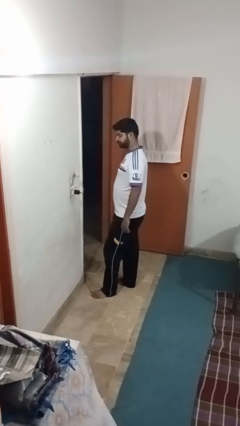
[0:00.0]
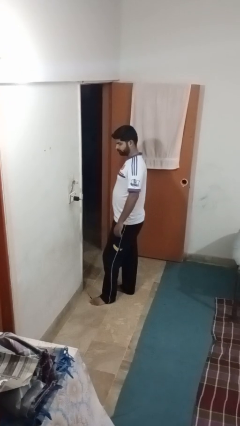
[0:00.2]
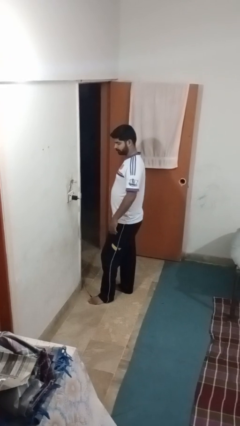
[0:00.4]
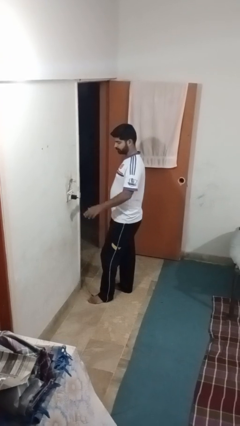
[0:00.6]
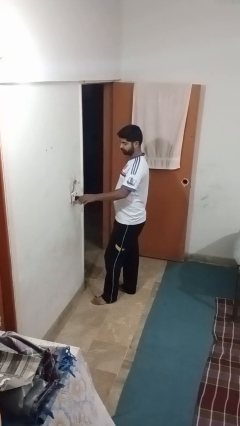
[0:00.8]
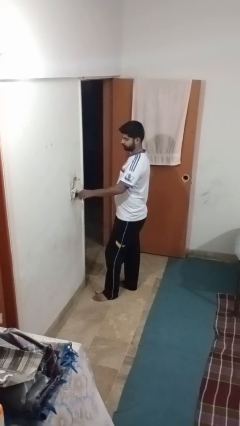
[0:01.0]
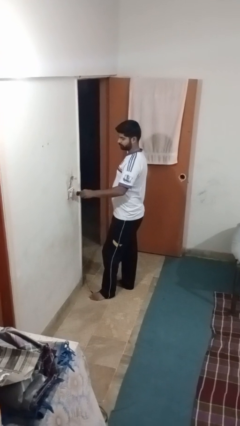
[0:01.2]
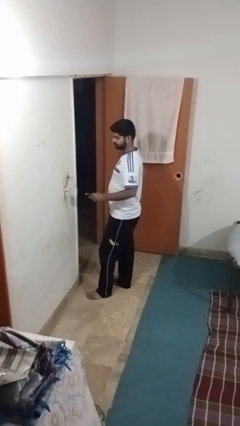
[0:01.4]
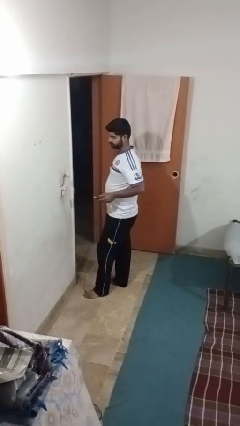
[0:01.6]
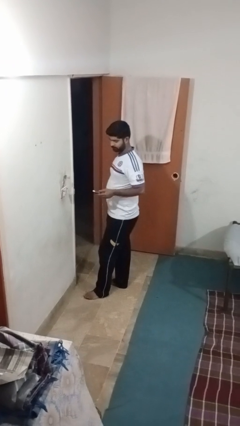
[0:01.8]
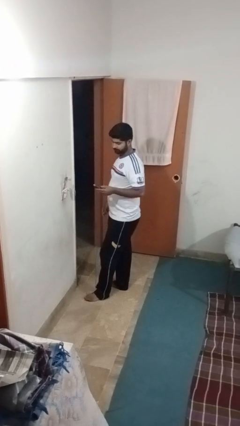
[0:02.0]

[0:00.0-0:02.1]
person unplugs from electrical socket

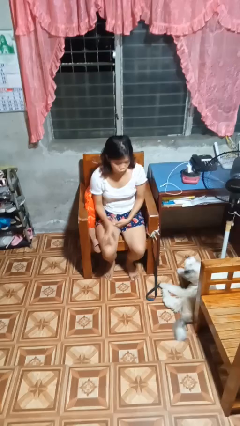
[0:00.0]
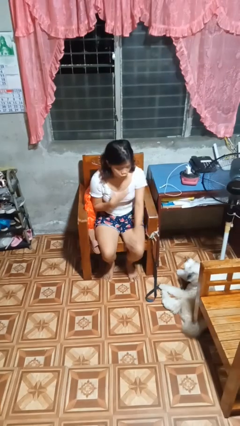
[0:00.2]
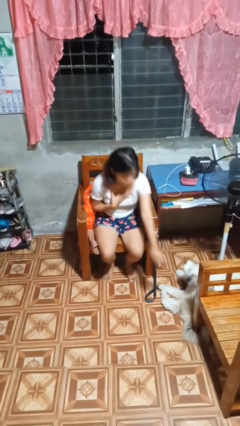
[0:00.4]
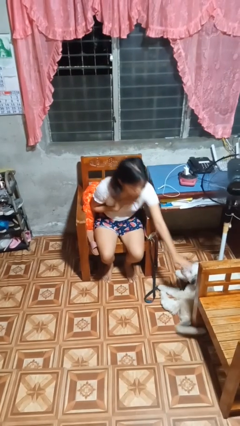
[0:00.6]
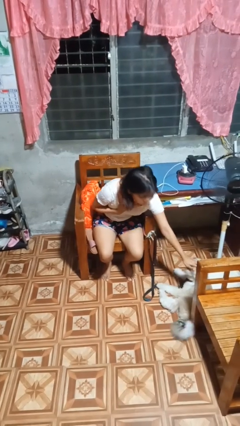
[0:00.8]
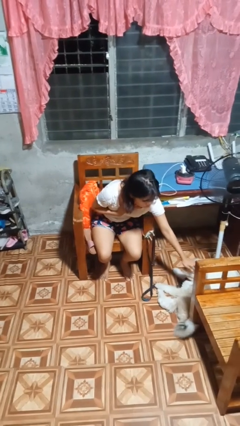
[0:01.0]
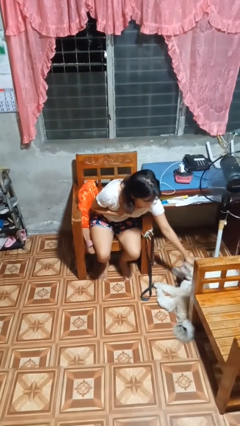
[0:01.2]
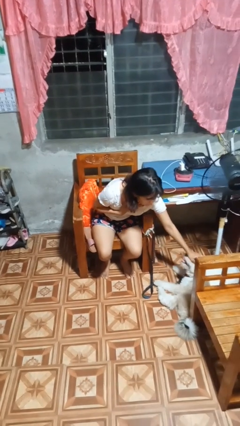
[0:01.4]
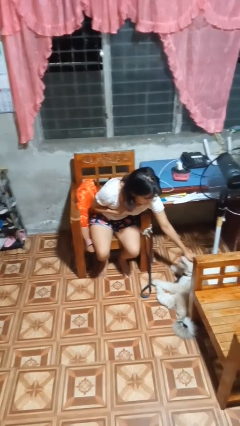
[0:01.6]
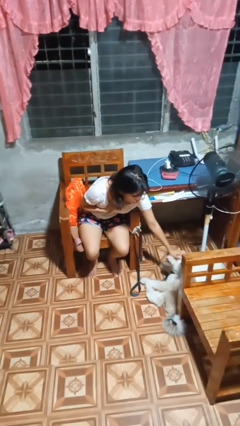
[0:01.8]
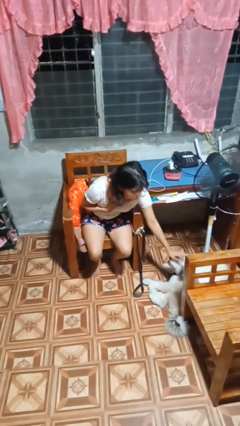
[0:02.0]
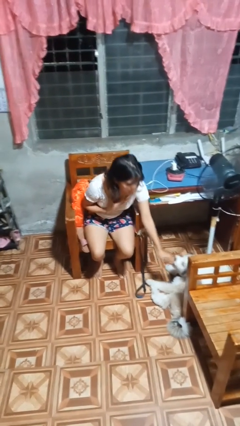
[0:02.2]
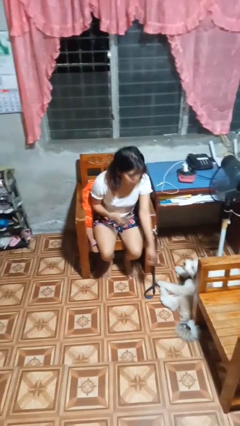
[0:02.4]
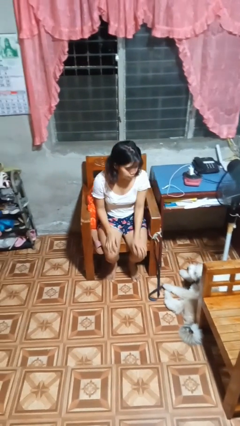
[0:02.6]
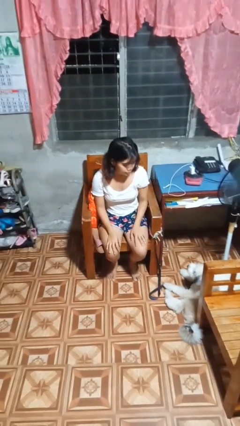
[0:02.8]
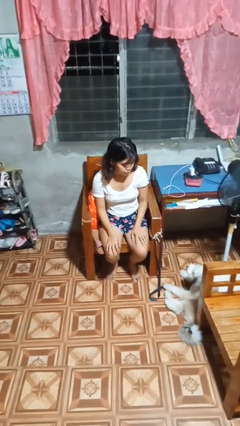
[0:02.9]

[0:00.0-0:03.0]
person pets dog

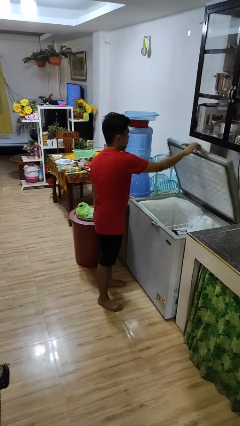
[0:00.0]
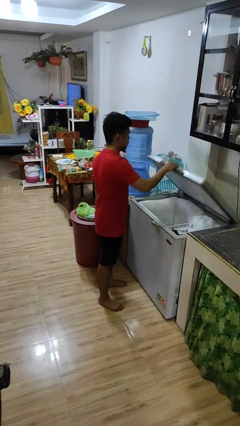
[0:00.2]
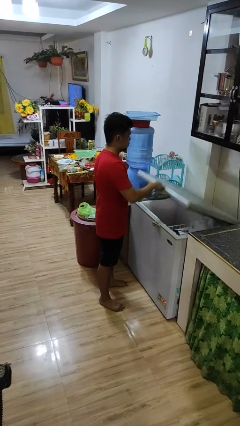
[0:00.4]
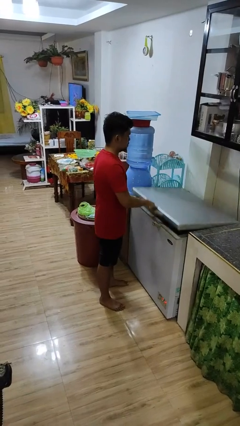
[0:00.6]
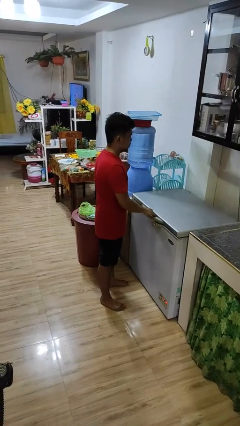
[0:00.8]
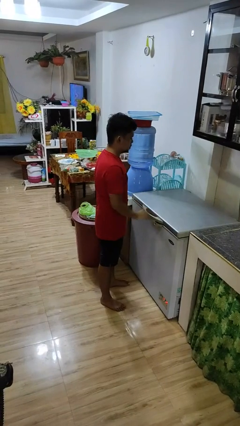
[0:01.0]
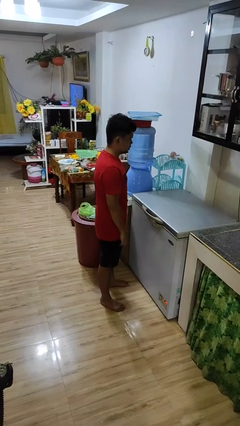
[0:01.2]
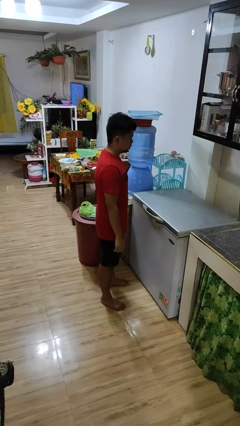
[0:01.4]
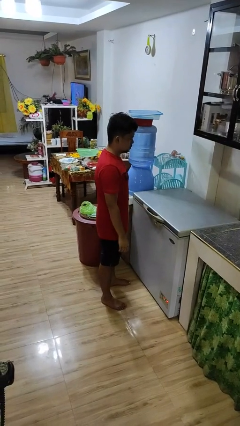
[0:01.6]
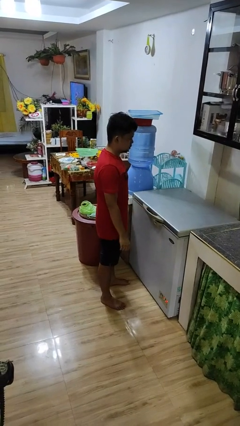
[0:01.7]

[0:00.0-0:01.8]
person closes refrigerator

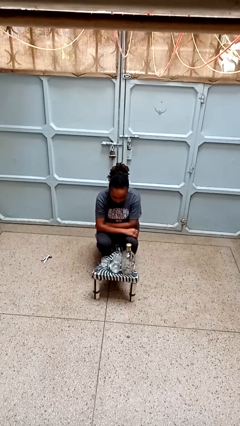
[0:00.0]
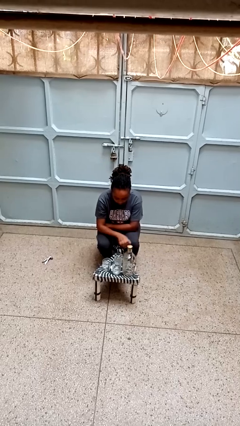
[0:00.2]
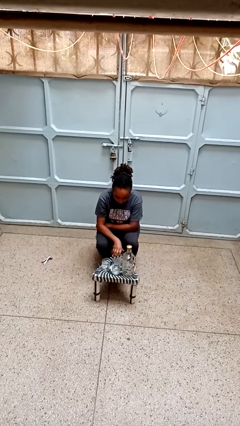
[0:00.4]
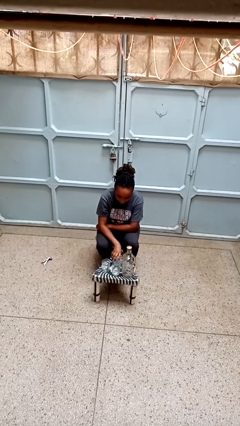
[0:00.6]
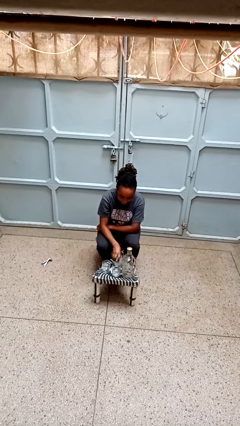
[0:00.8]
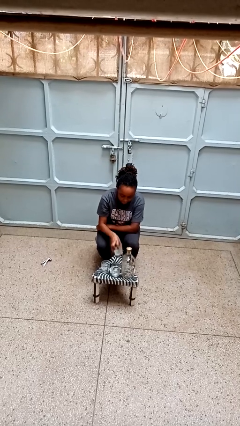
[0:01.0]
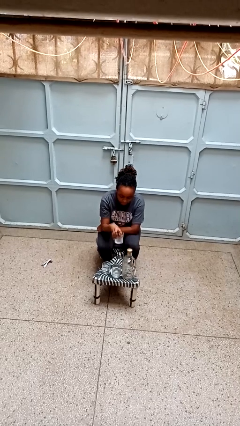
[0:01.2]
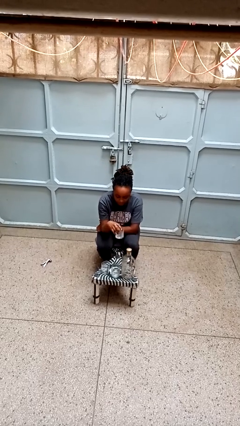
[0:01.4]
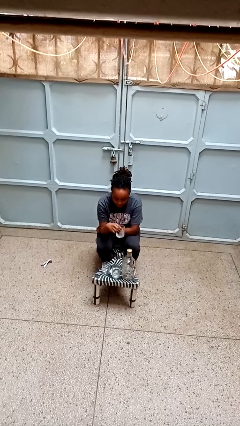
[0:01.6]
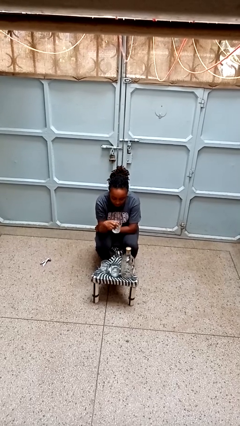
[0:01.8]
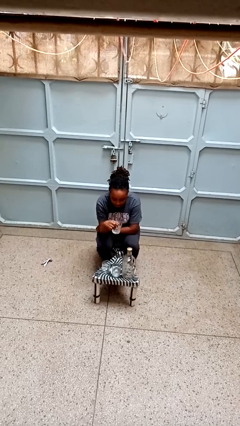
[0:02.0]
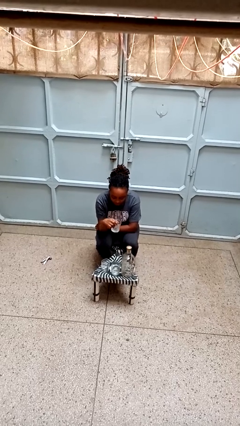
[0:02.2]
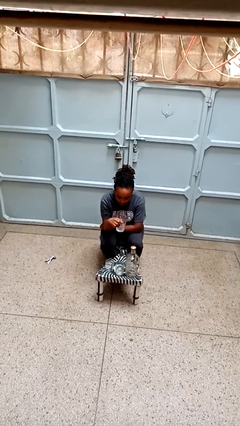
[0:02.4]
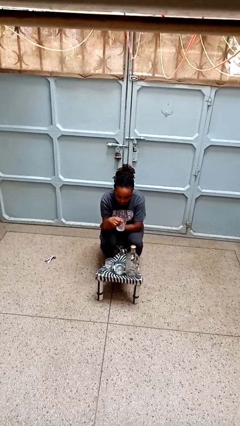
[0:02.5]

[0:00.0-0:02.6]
person picks up object from table

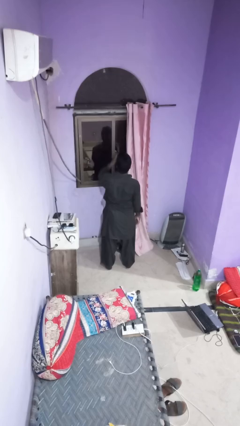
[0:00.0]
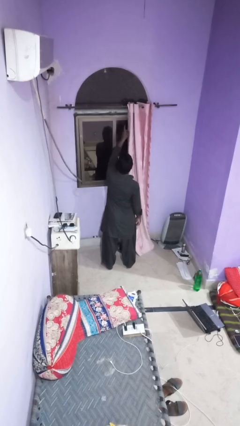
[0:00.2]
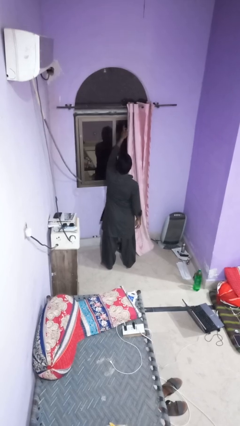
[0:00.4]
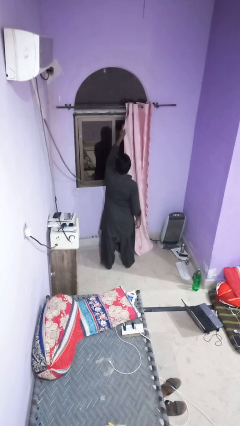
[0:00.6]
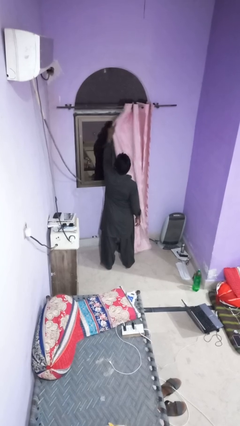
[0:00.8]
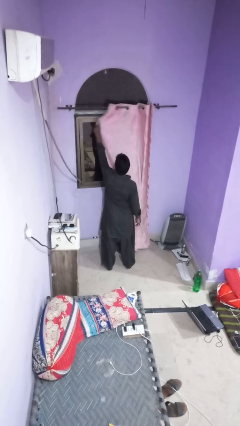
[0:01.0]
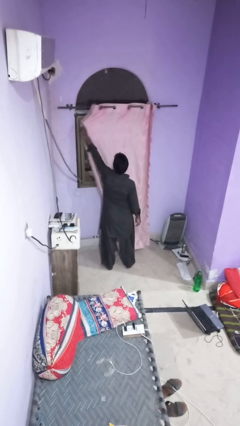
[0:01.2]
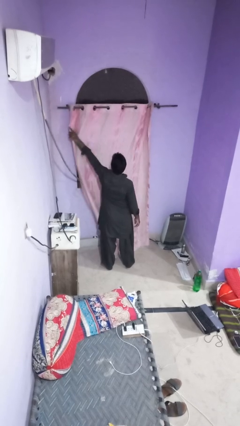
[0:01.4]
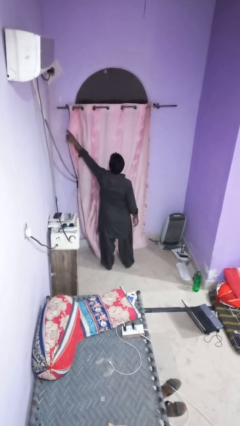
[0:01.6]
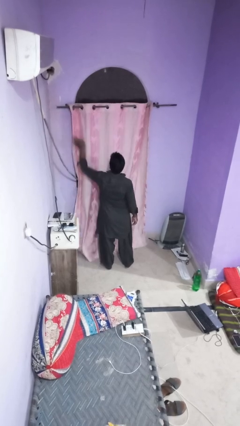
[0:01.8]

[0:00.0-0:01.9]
person closes curtains

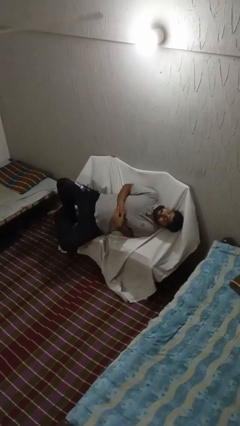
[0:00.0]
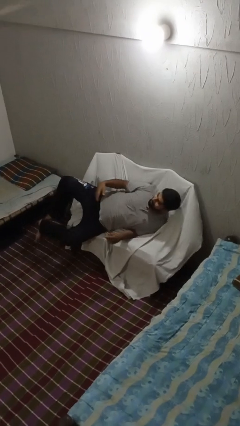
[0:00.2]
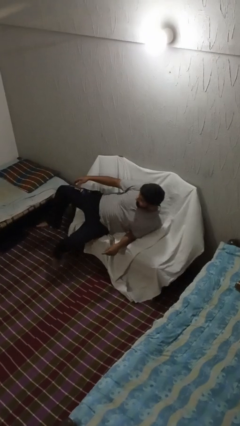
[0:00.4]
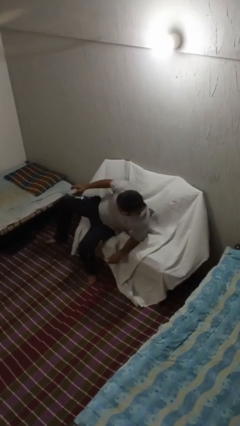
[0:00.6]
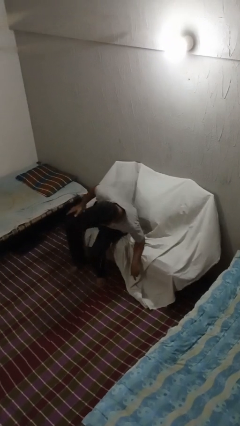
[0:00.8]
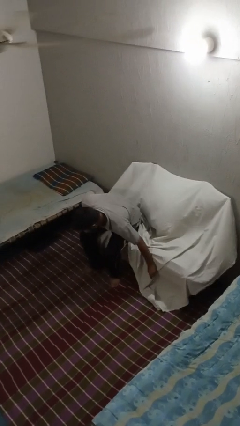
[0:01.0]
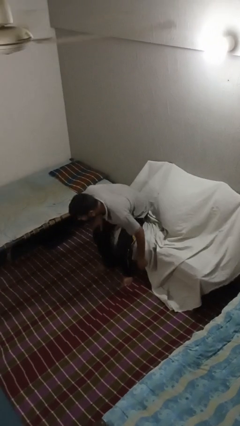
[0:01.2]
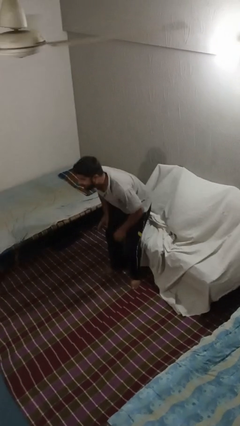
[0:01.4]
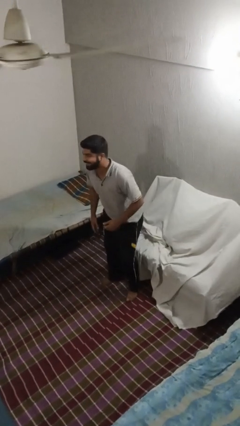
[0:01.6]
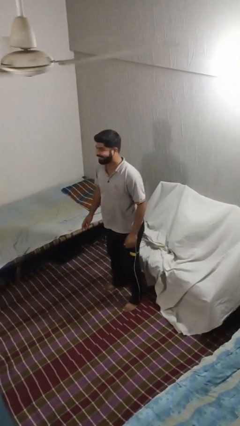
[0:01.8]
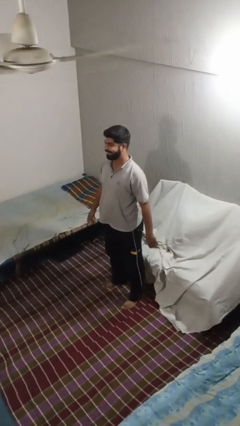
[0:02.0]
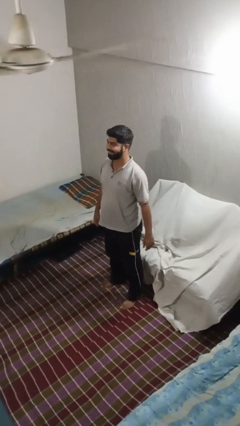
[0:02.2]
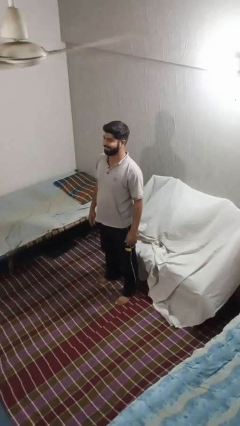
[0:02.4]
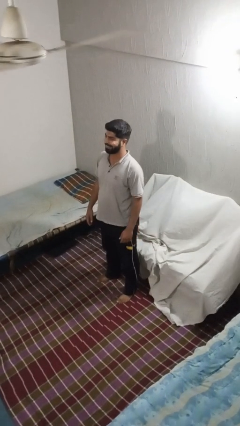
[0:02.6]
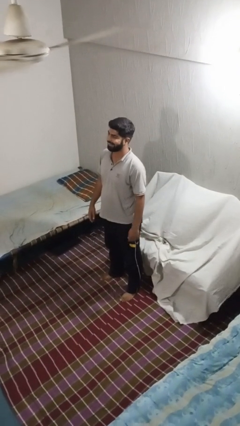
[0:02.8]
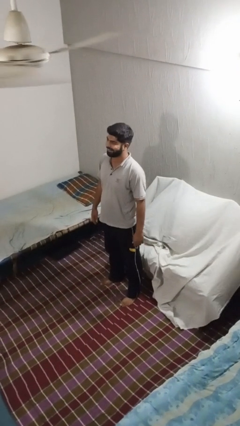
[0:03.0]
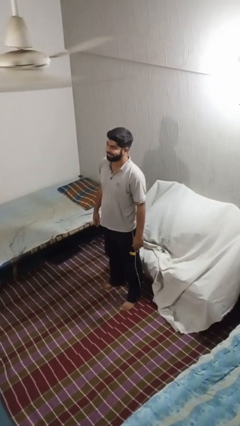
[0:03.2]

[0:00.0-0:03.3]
person stands up

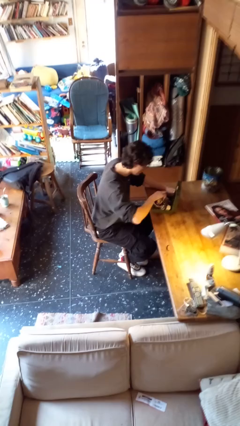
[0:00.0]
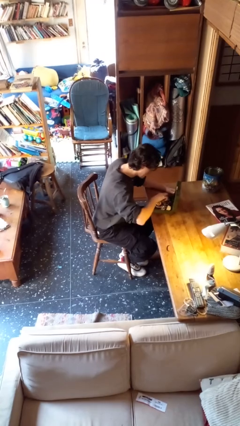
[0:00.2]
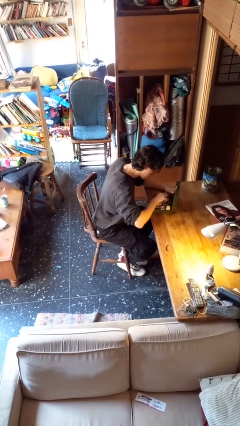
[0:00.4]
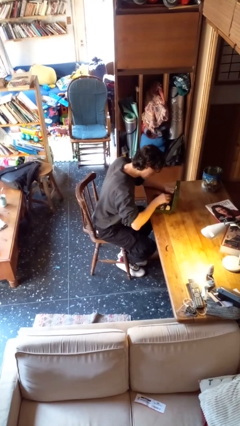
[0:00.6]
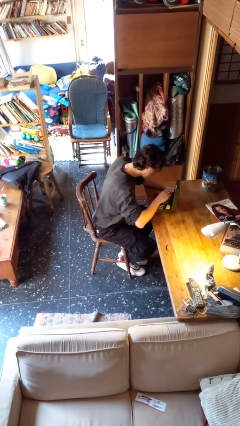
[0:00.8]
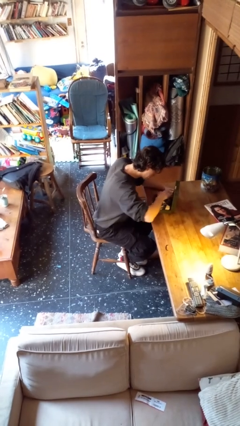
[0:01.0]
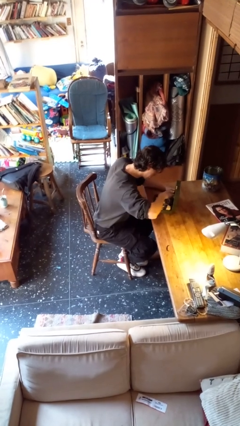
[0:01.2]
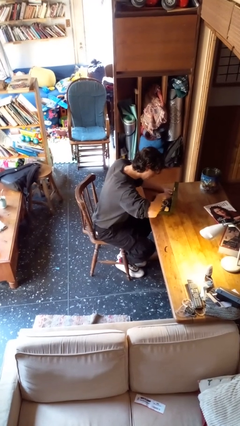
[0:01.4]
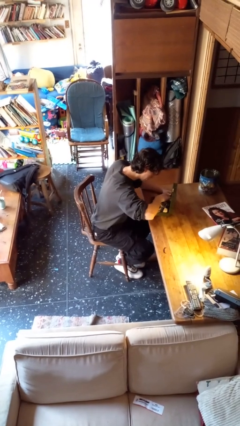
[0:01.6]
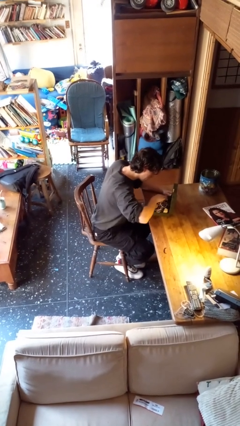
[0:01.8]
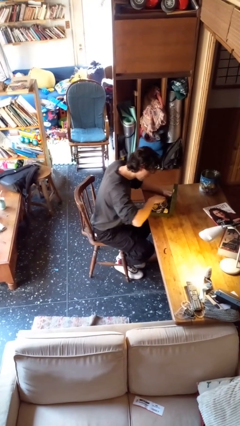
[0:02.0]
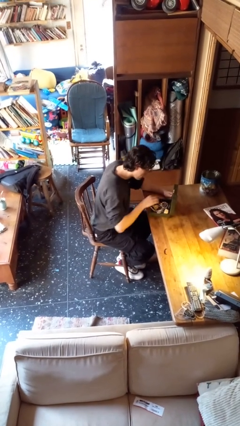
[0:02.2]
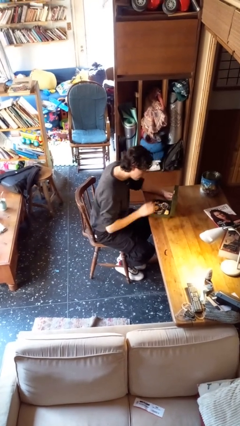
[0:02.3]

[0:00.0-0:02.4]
person searches jewelry box

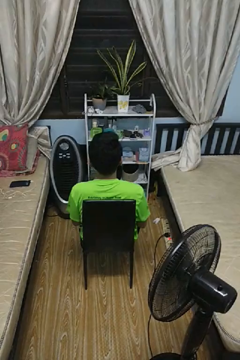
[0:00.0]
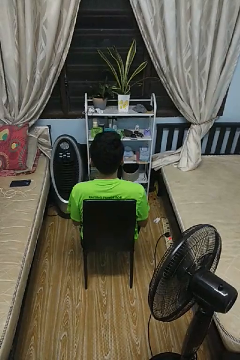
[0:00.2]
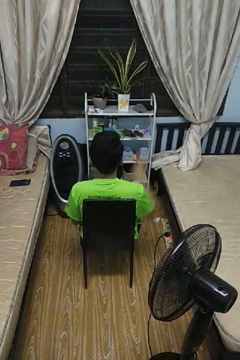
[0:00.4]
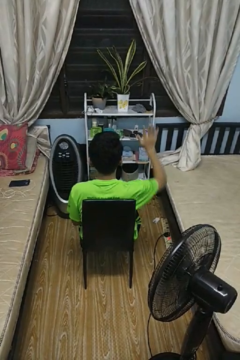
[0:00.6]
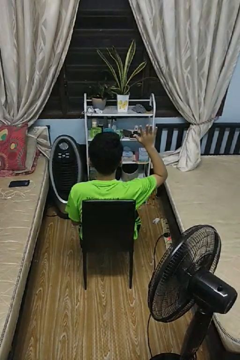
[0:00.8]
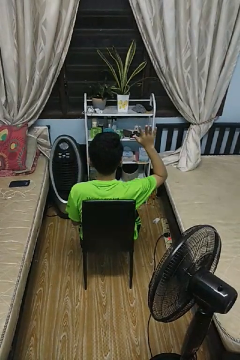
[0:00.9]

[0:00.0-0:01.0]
person gestures number five
